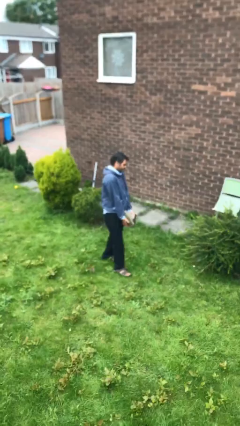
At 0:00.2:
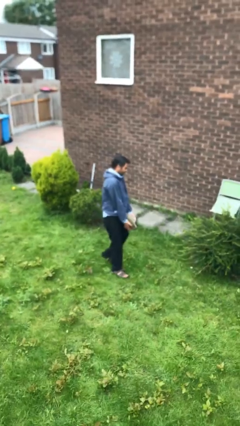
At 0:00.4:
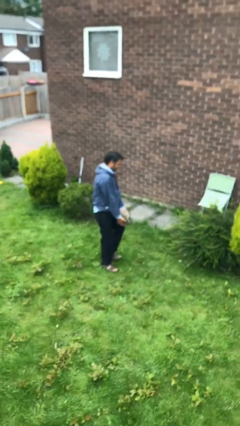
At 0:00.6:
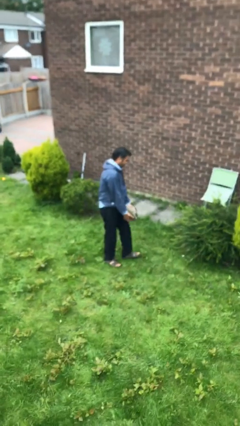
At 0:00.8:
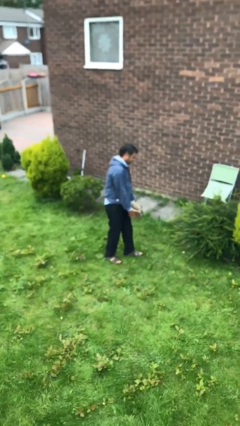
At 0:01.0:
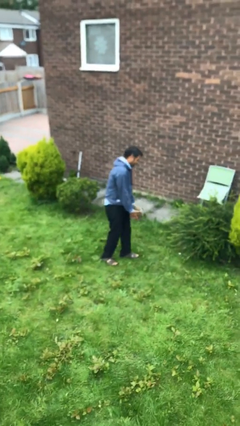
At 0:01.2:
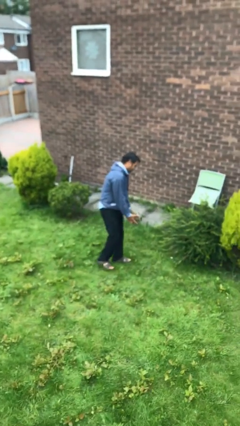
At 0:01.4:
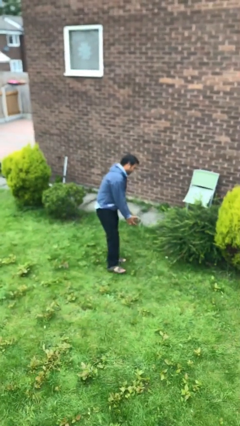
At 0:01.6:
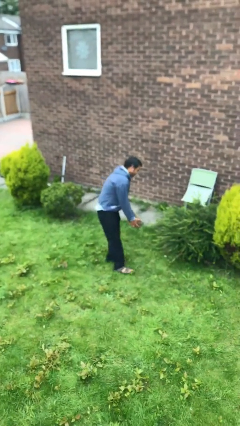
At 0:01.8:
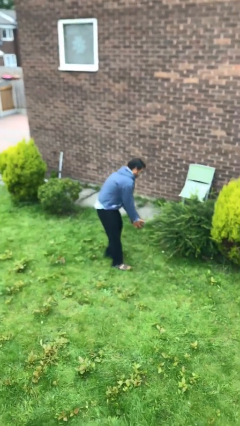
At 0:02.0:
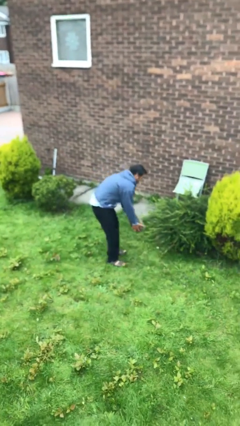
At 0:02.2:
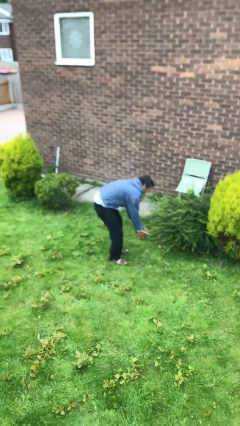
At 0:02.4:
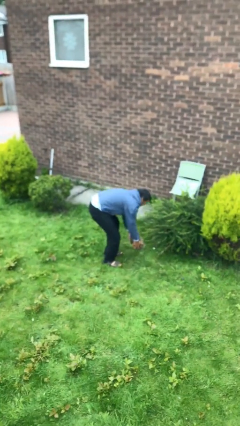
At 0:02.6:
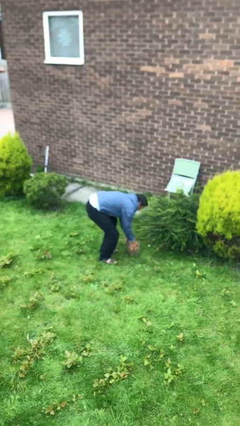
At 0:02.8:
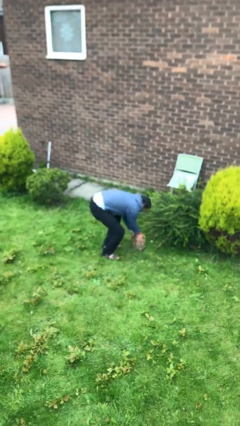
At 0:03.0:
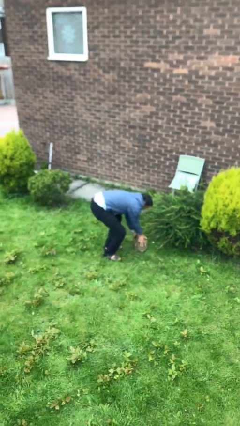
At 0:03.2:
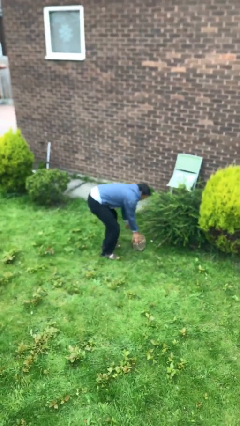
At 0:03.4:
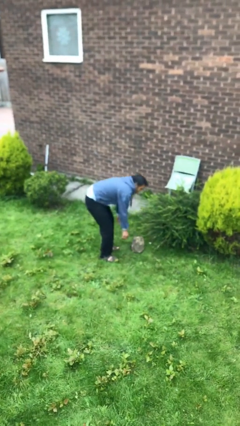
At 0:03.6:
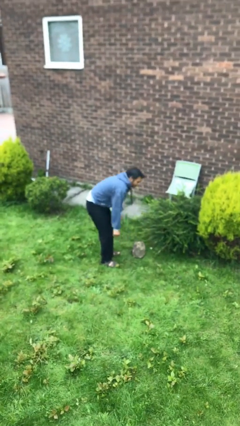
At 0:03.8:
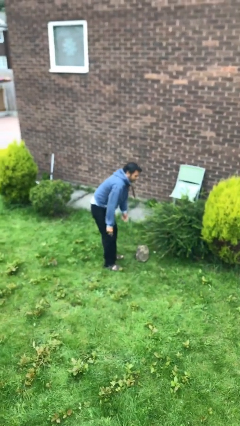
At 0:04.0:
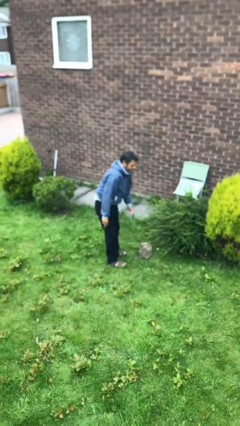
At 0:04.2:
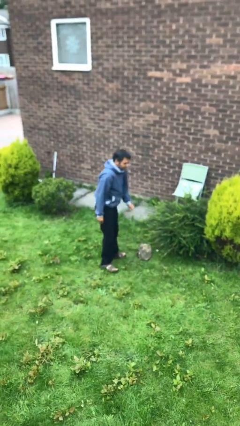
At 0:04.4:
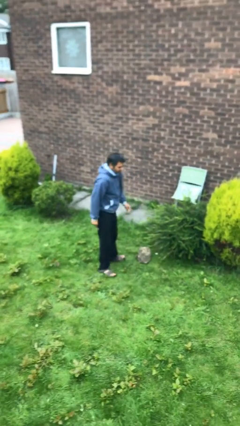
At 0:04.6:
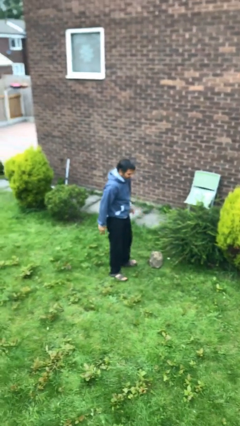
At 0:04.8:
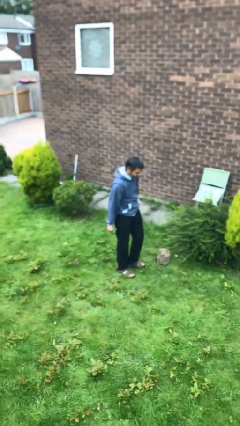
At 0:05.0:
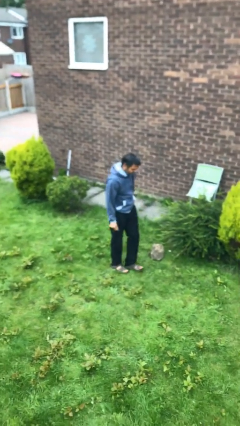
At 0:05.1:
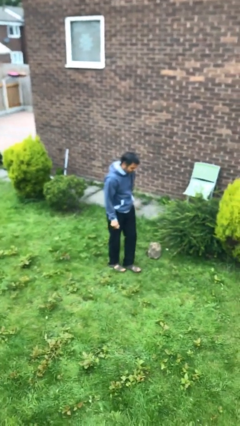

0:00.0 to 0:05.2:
person puts down object on floor

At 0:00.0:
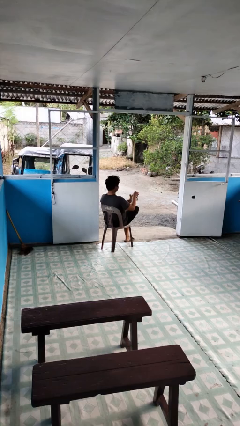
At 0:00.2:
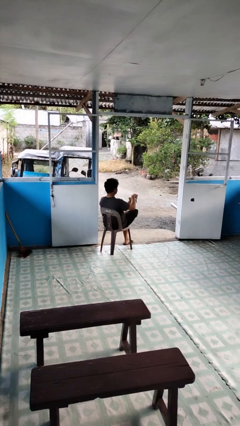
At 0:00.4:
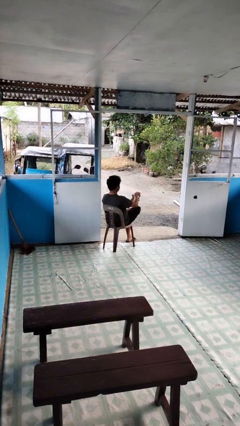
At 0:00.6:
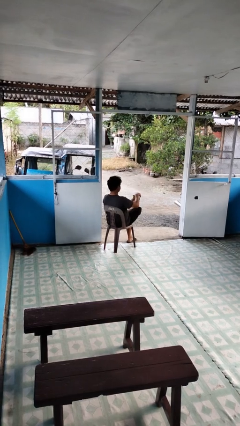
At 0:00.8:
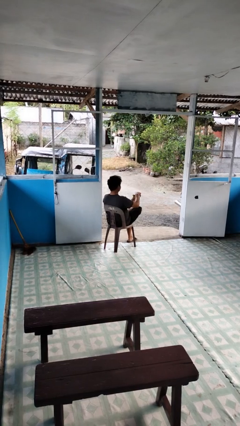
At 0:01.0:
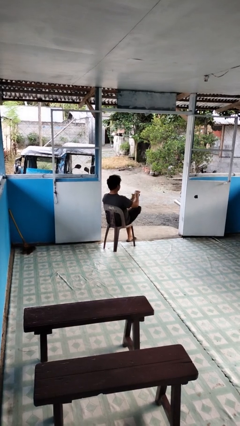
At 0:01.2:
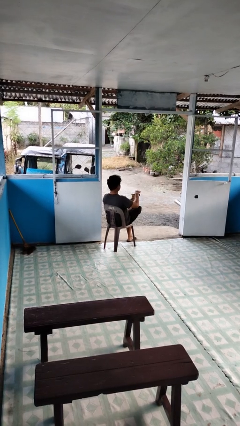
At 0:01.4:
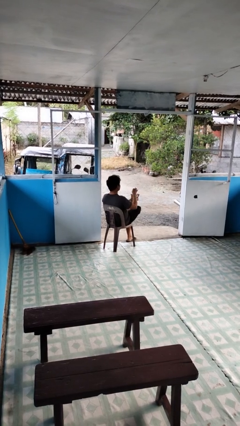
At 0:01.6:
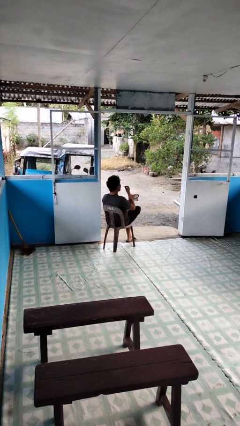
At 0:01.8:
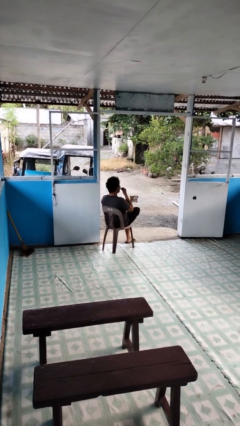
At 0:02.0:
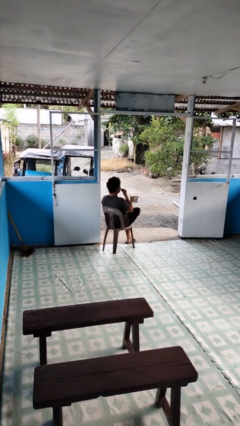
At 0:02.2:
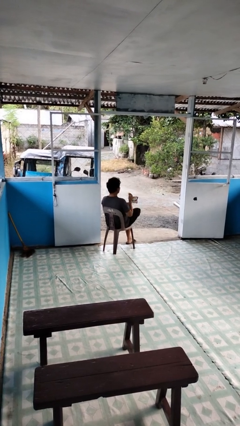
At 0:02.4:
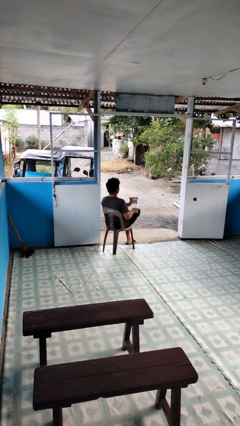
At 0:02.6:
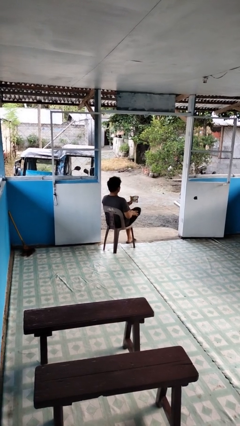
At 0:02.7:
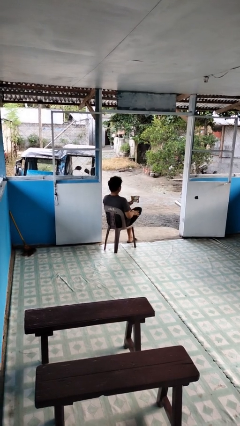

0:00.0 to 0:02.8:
person eats snack from bag

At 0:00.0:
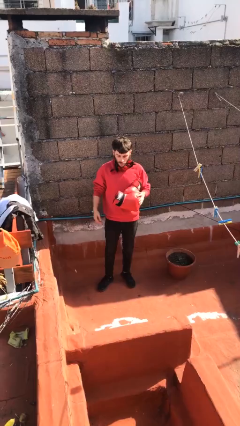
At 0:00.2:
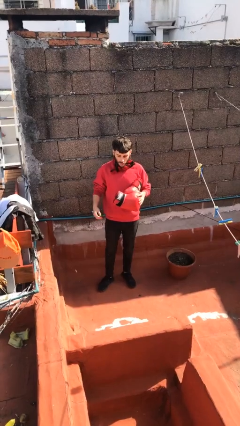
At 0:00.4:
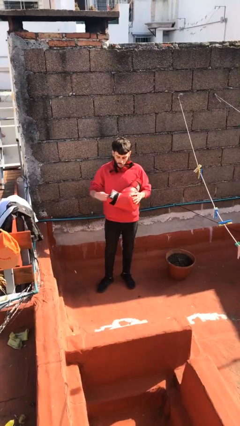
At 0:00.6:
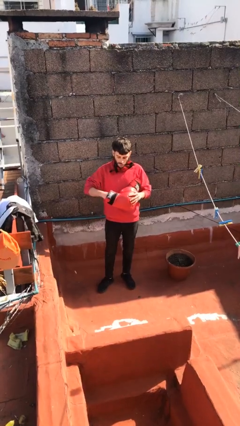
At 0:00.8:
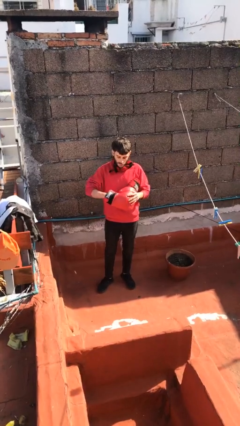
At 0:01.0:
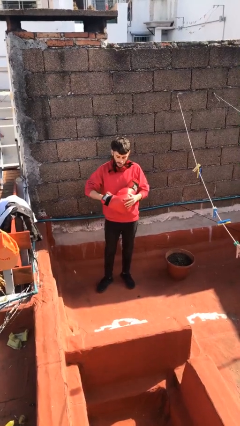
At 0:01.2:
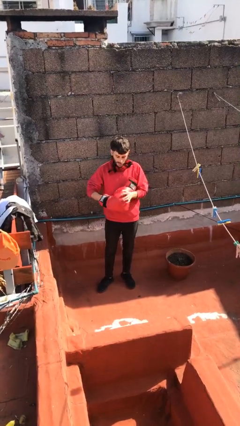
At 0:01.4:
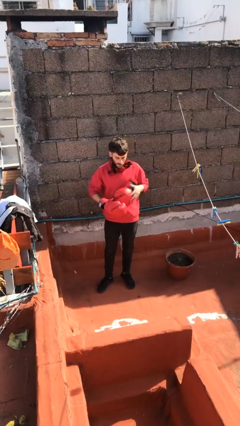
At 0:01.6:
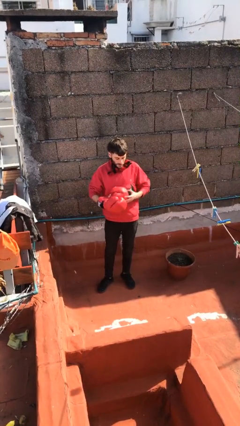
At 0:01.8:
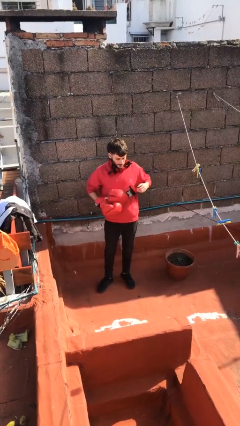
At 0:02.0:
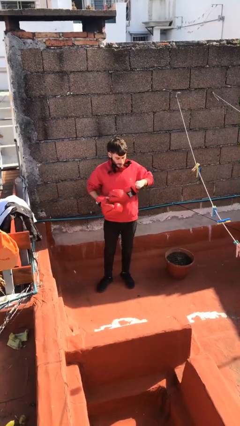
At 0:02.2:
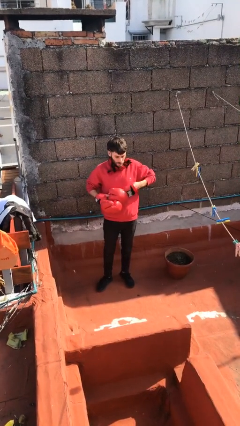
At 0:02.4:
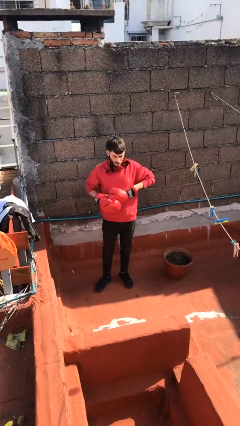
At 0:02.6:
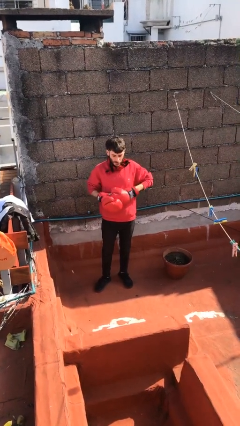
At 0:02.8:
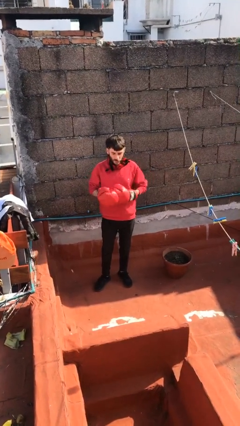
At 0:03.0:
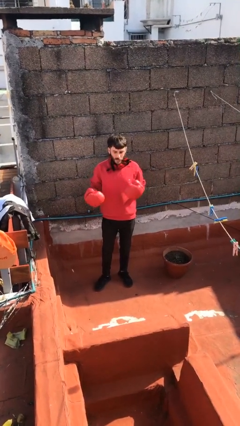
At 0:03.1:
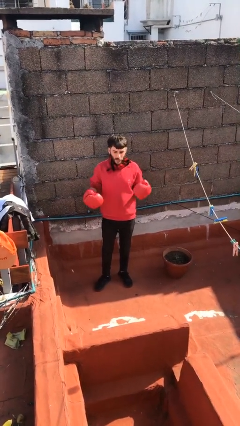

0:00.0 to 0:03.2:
person puts on gloves

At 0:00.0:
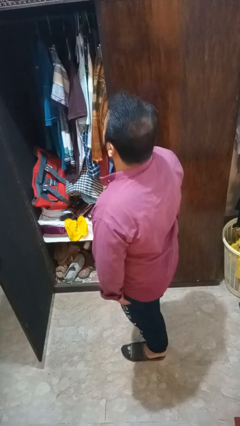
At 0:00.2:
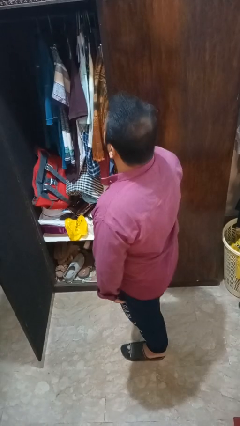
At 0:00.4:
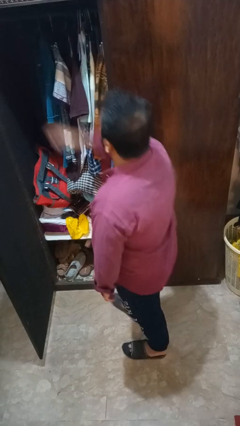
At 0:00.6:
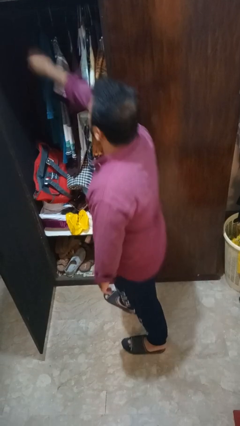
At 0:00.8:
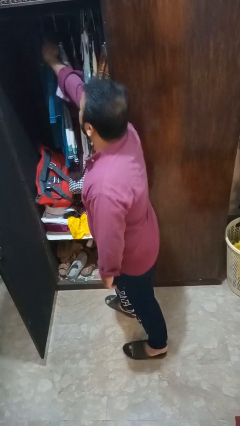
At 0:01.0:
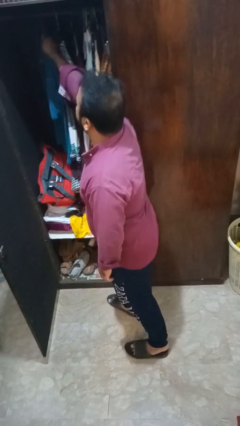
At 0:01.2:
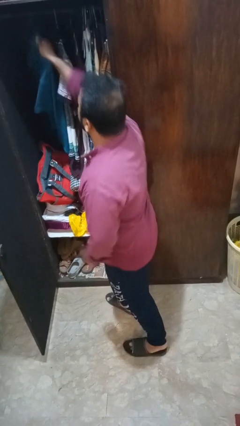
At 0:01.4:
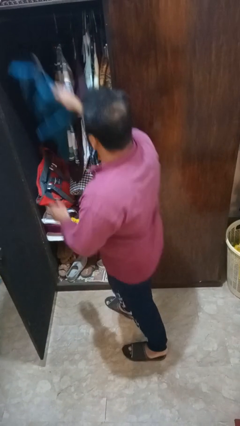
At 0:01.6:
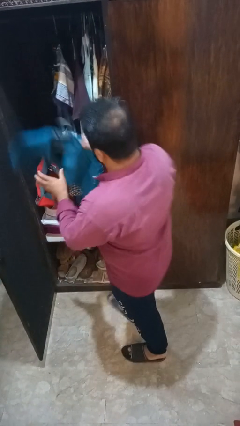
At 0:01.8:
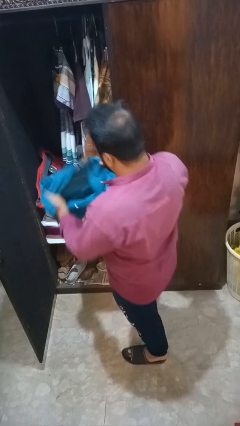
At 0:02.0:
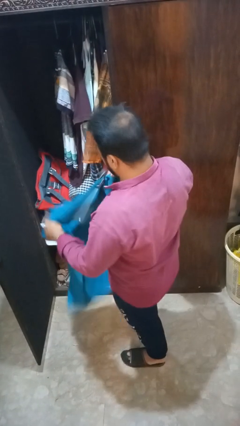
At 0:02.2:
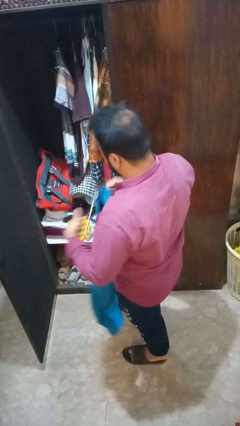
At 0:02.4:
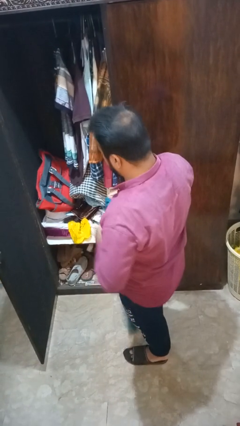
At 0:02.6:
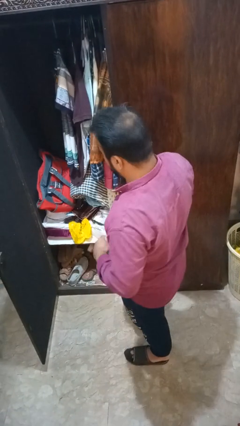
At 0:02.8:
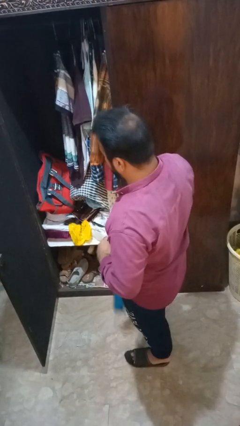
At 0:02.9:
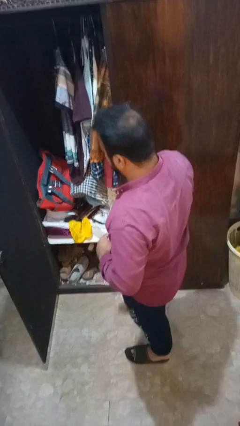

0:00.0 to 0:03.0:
person takes clothes from closet

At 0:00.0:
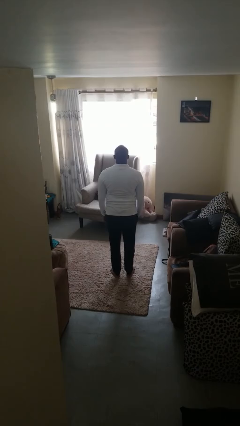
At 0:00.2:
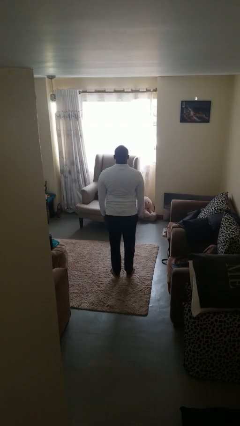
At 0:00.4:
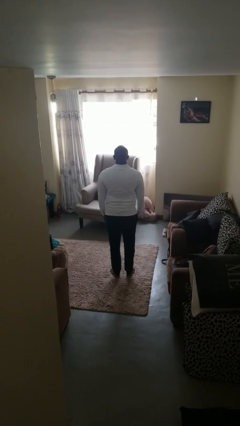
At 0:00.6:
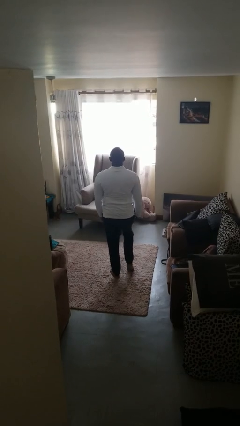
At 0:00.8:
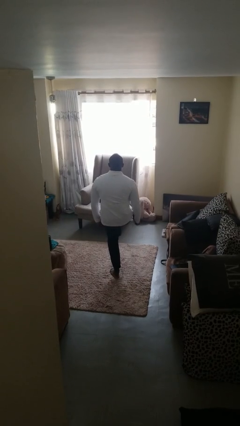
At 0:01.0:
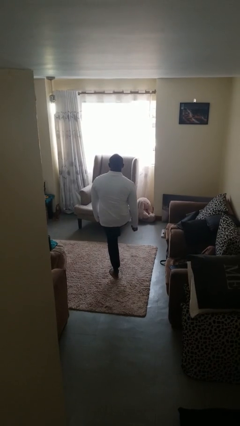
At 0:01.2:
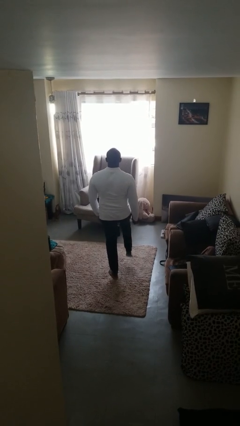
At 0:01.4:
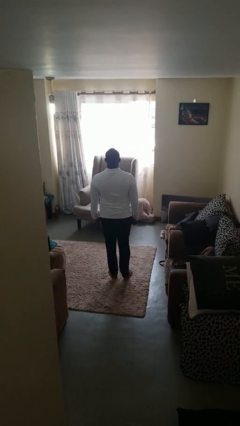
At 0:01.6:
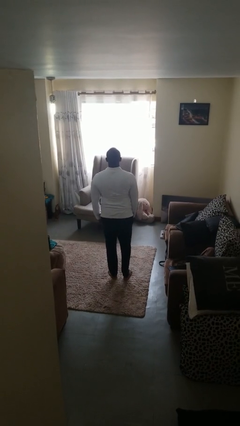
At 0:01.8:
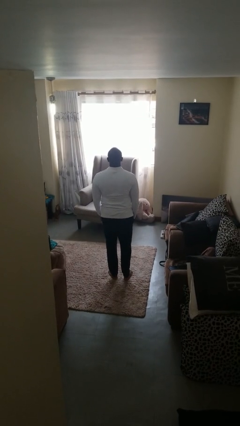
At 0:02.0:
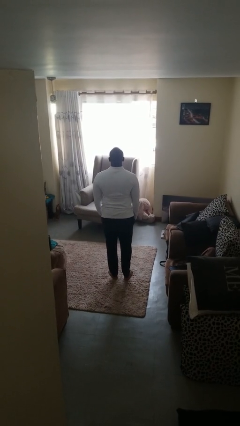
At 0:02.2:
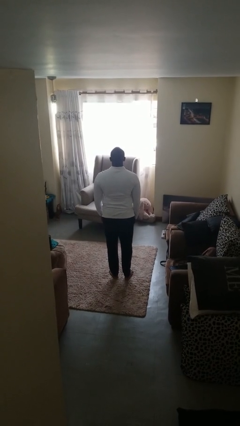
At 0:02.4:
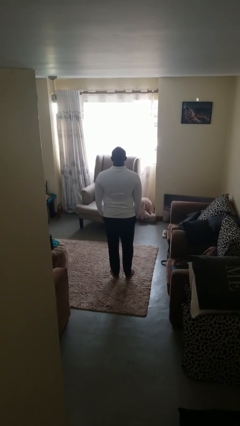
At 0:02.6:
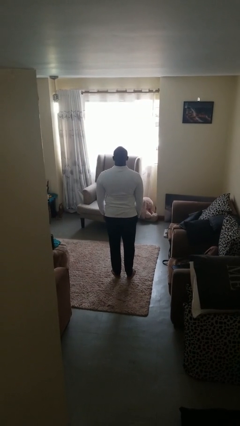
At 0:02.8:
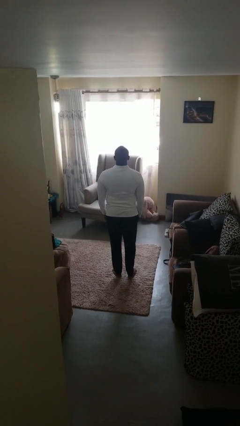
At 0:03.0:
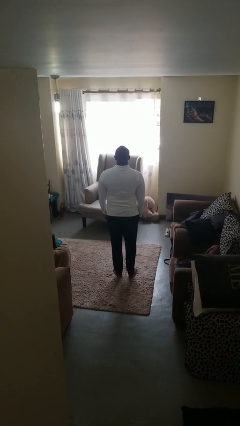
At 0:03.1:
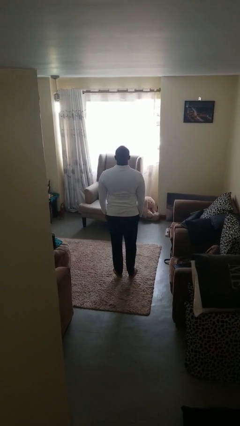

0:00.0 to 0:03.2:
person karate kicks

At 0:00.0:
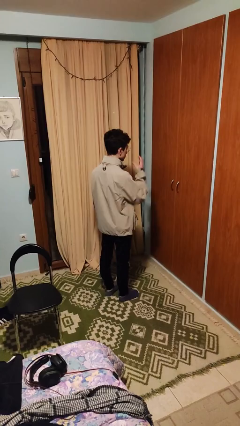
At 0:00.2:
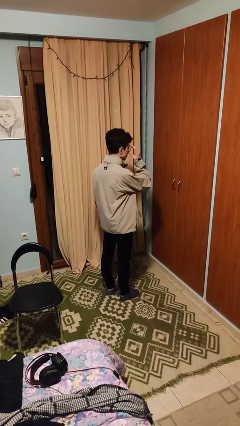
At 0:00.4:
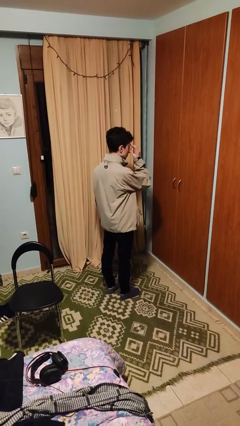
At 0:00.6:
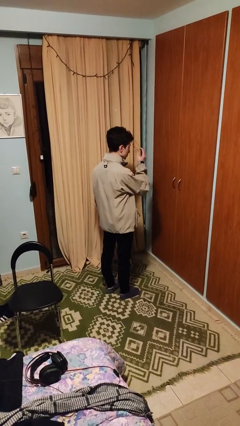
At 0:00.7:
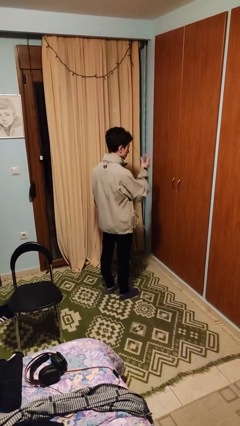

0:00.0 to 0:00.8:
person takes off glasses
